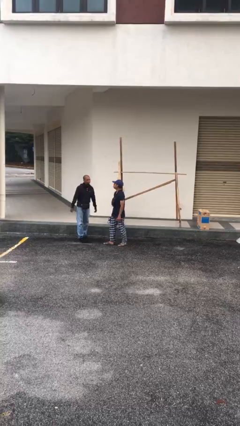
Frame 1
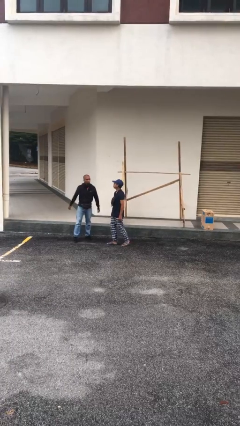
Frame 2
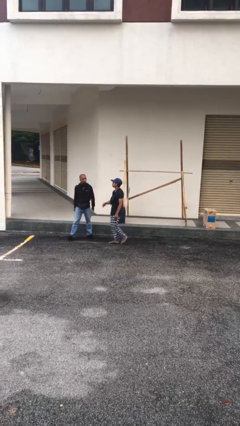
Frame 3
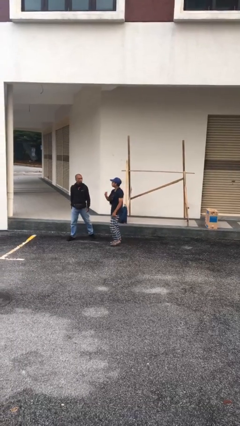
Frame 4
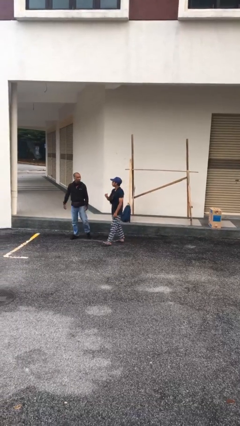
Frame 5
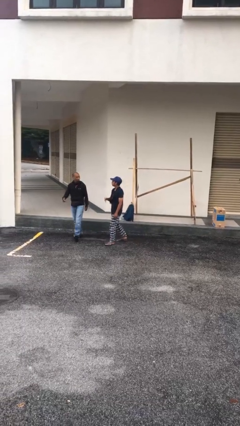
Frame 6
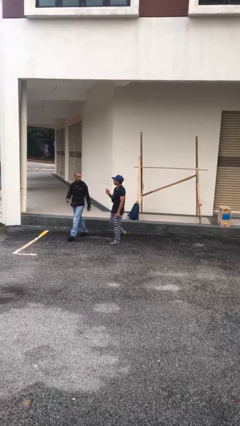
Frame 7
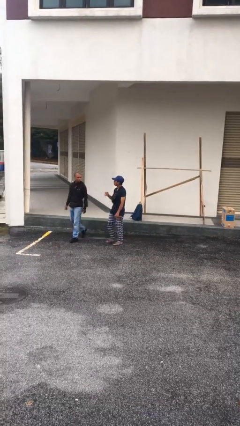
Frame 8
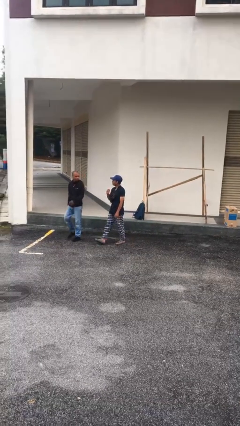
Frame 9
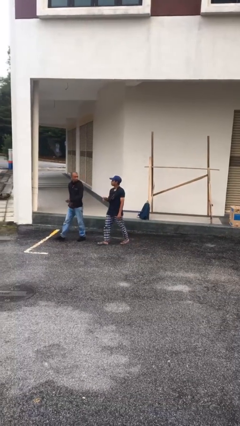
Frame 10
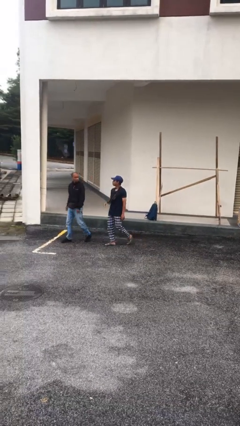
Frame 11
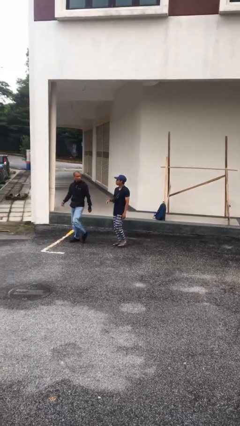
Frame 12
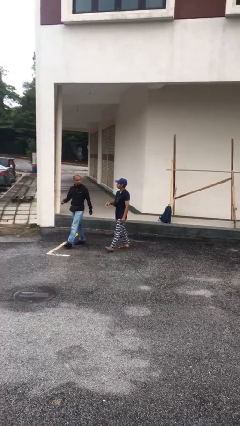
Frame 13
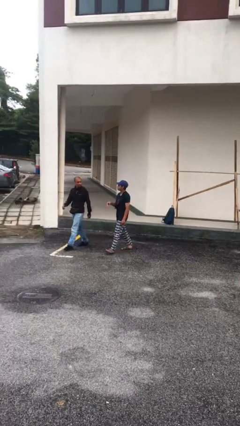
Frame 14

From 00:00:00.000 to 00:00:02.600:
person talks to person

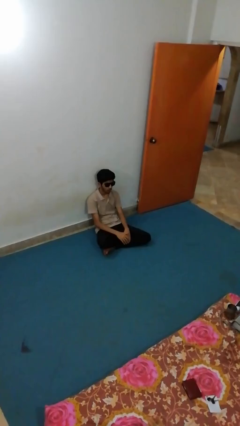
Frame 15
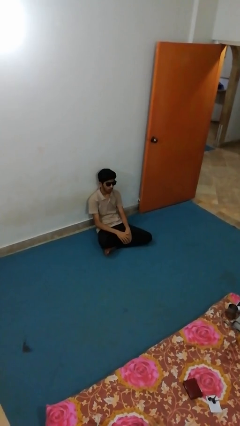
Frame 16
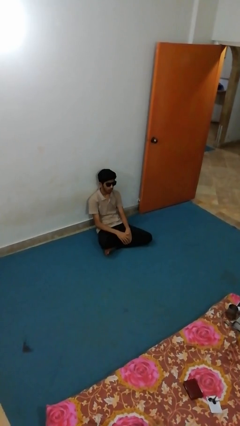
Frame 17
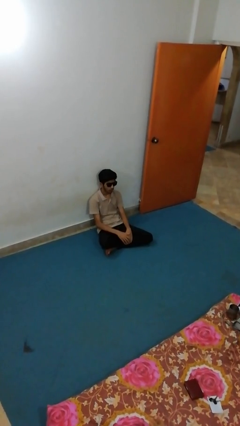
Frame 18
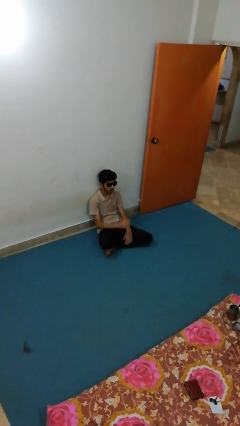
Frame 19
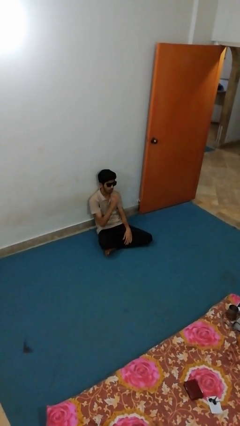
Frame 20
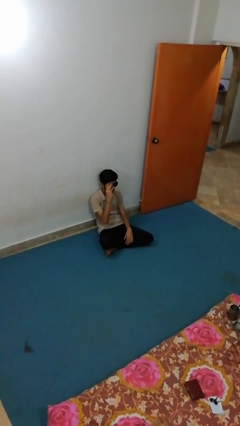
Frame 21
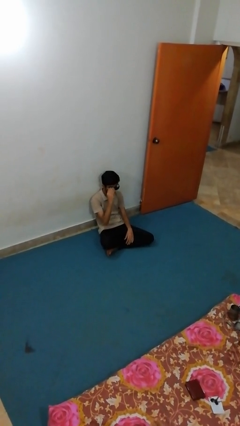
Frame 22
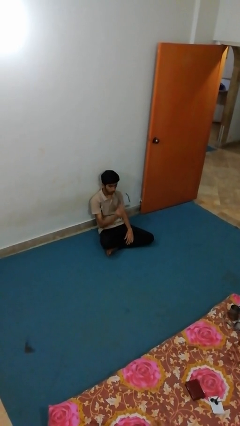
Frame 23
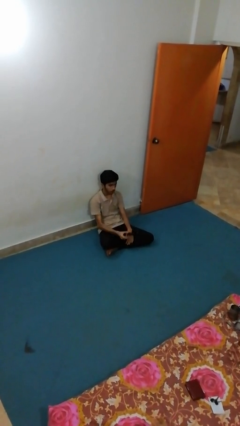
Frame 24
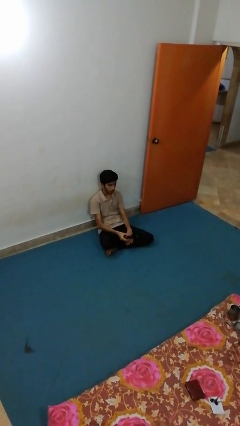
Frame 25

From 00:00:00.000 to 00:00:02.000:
person takes off sunglasses

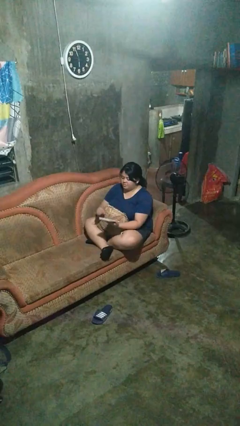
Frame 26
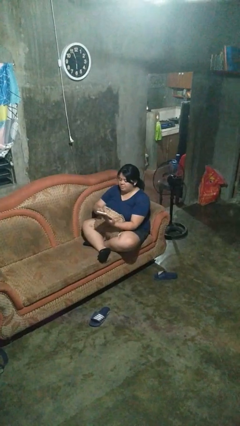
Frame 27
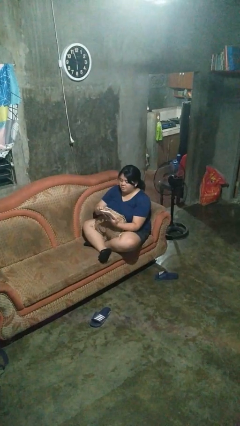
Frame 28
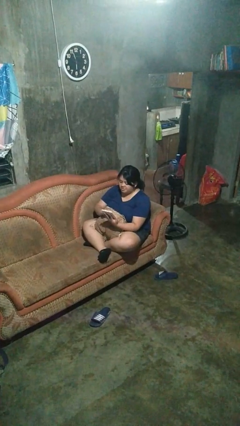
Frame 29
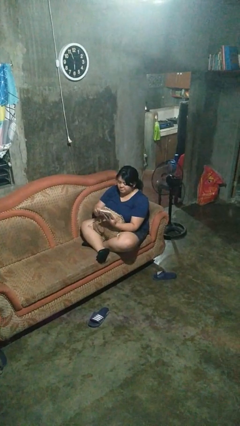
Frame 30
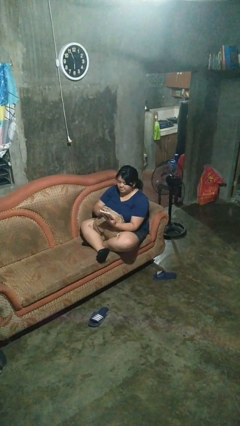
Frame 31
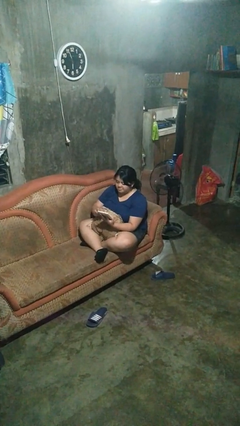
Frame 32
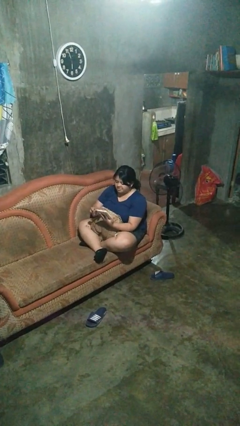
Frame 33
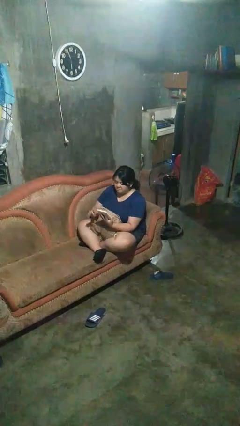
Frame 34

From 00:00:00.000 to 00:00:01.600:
person interacts with tablet

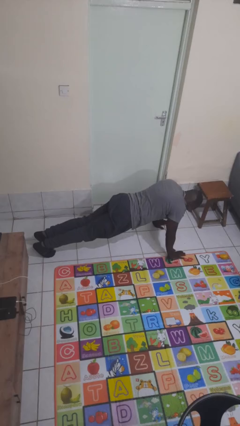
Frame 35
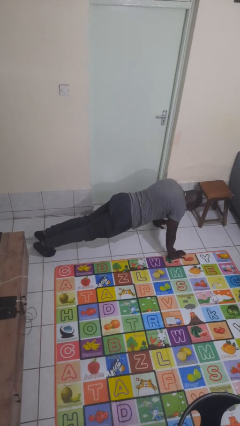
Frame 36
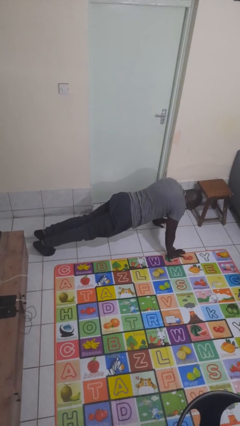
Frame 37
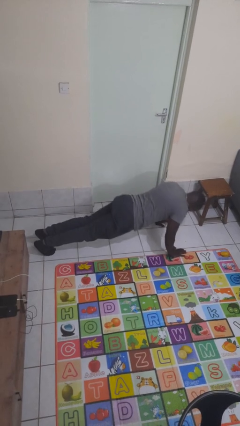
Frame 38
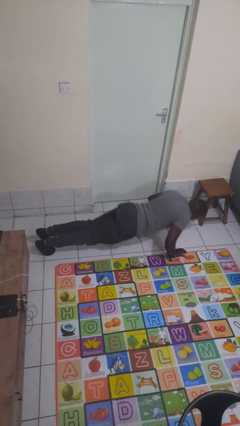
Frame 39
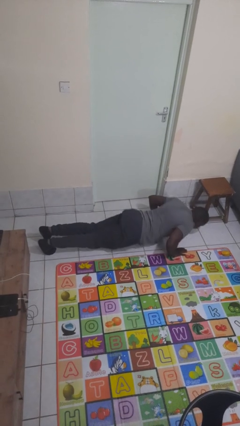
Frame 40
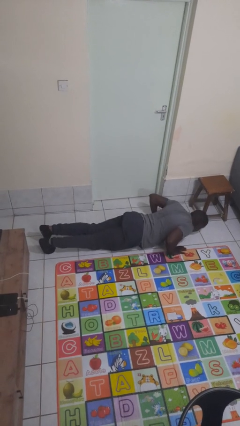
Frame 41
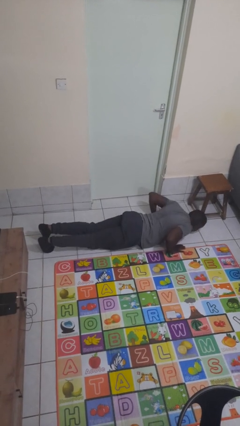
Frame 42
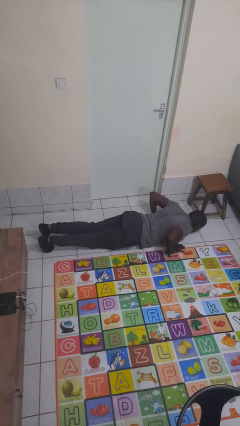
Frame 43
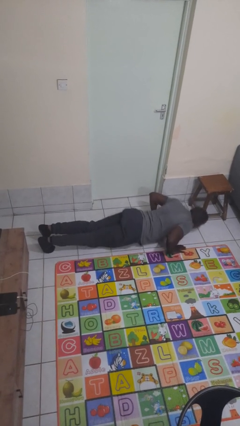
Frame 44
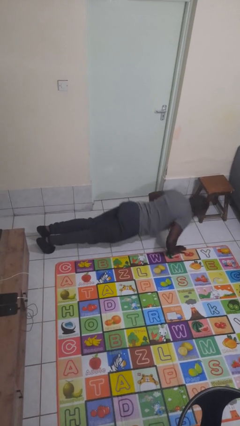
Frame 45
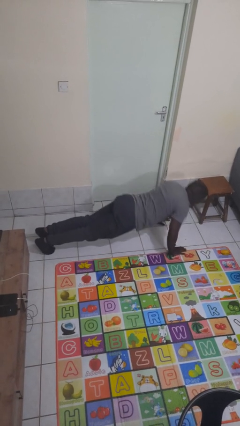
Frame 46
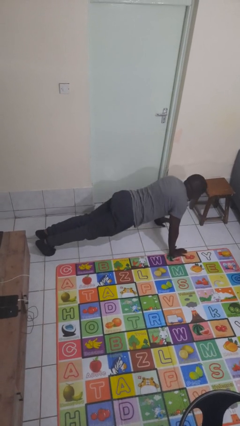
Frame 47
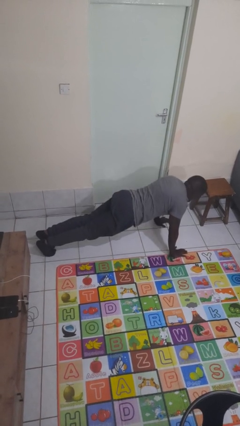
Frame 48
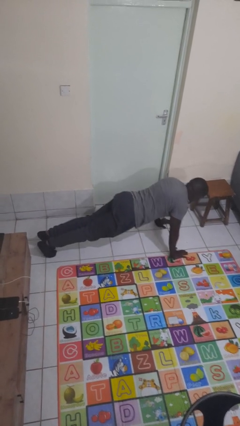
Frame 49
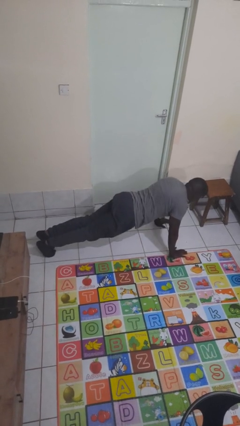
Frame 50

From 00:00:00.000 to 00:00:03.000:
person exercises with pushup

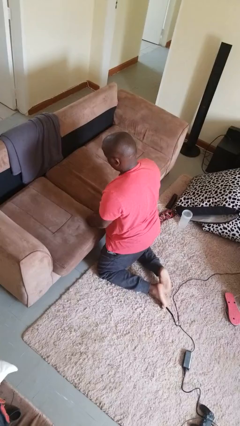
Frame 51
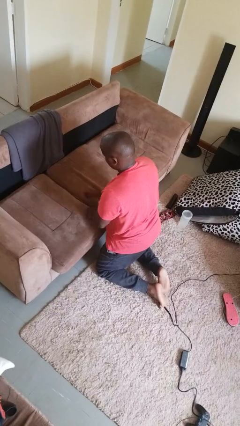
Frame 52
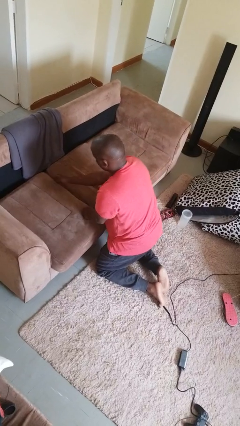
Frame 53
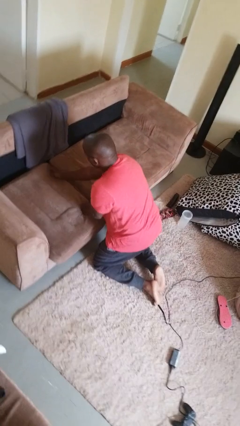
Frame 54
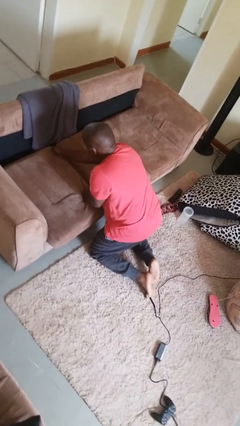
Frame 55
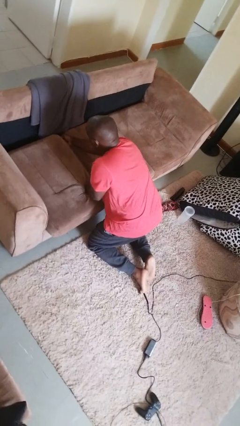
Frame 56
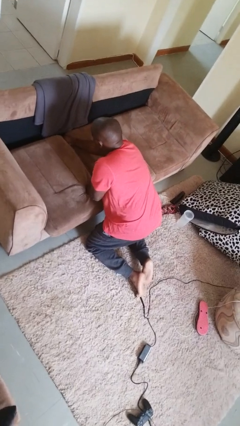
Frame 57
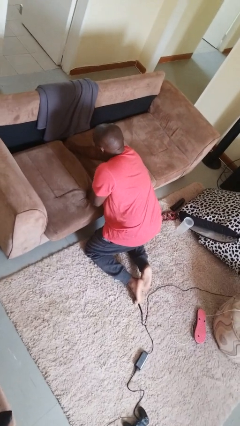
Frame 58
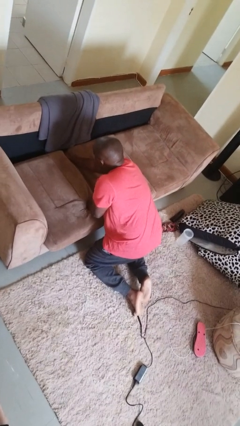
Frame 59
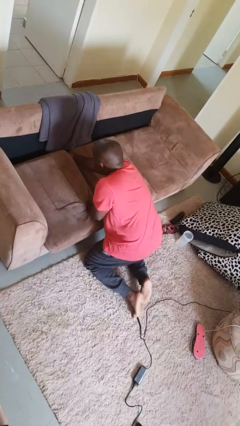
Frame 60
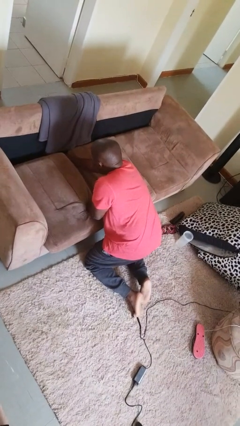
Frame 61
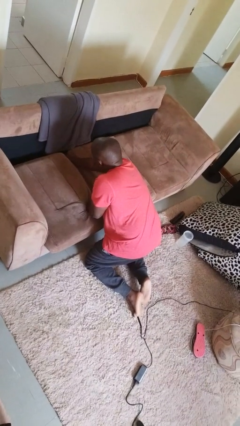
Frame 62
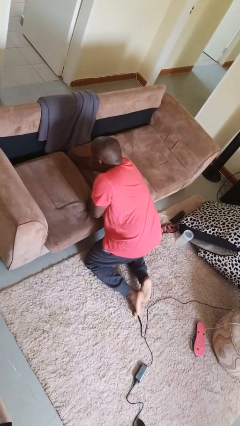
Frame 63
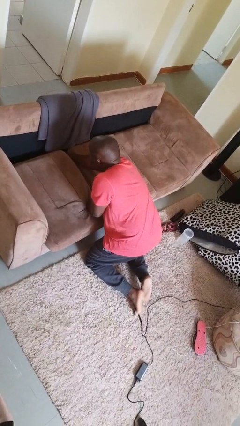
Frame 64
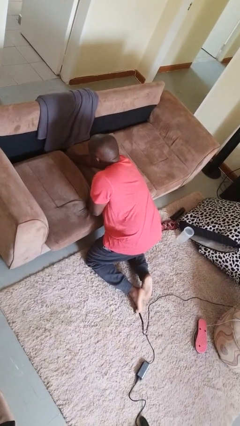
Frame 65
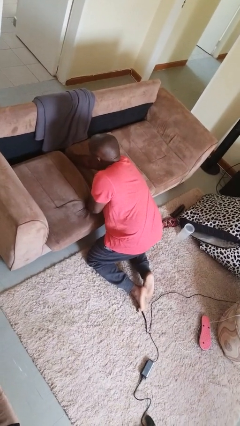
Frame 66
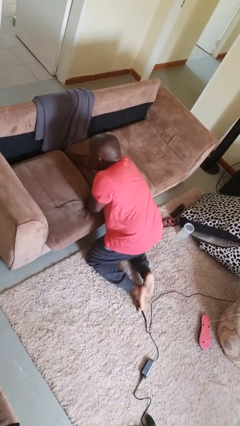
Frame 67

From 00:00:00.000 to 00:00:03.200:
person searches in couch

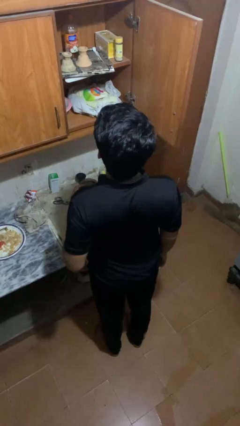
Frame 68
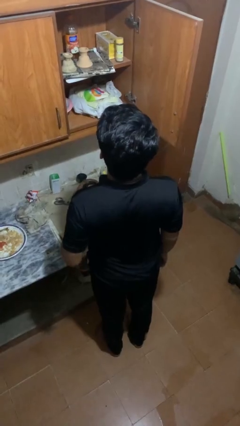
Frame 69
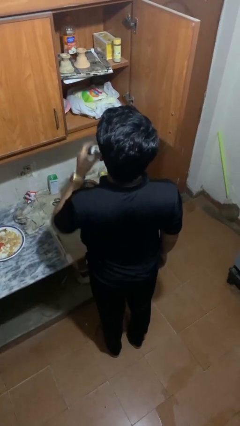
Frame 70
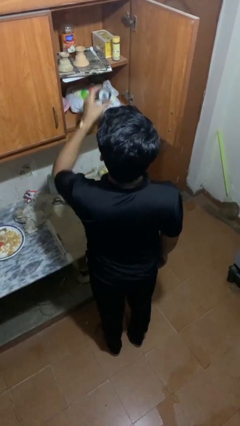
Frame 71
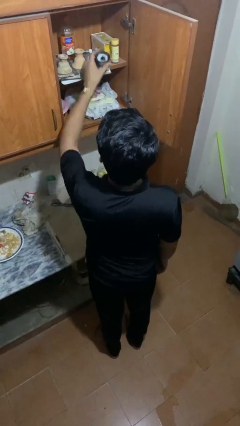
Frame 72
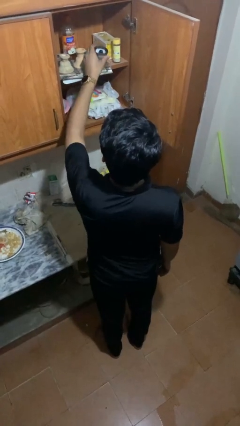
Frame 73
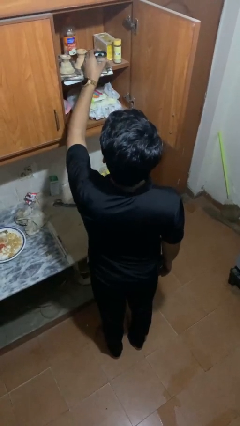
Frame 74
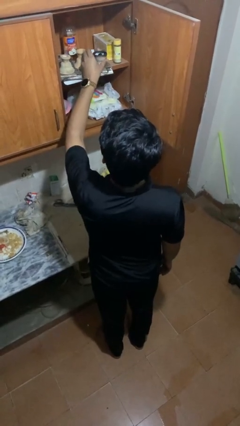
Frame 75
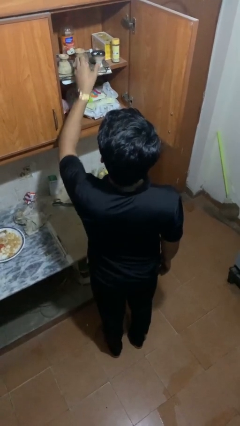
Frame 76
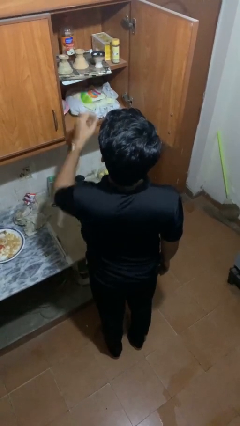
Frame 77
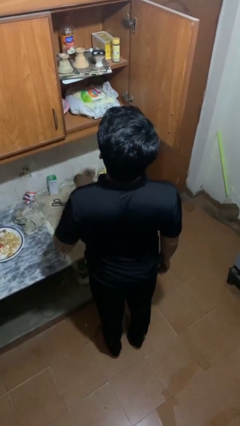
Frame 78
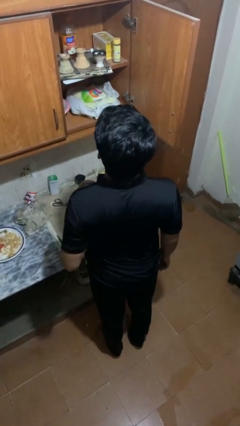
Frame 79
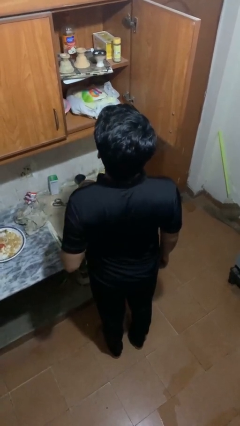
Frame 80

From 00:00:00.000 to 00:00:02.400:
person puts object in cabinet

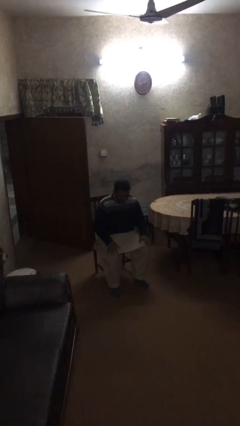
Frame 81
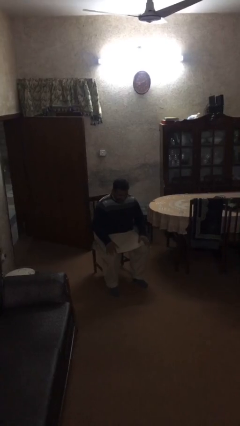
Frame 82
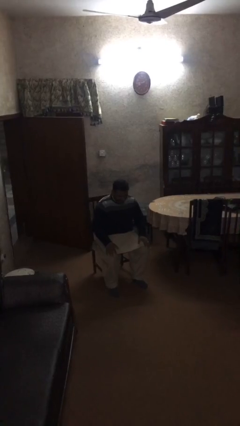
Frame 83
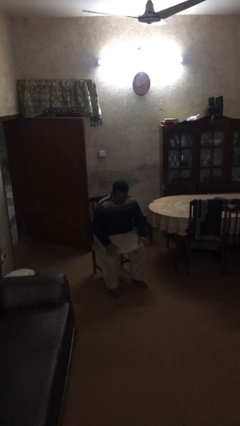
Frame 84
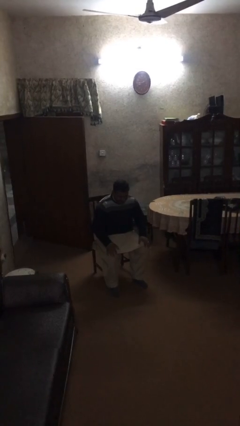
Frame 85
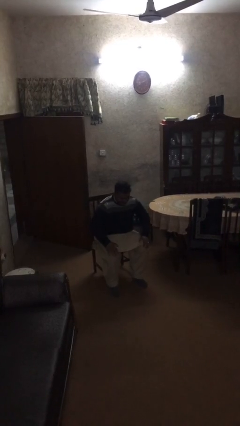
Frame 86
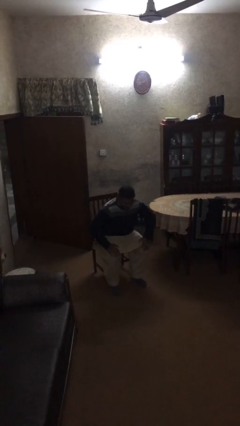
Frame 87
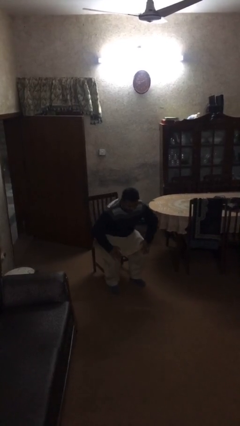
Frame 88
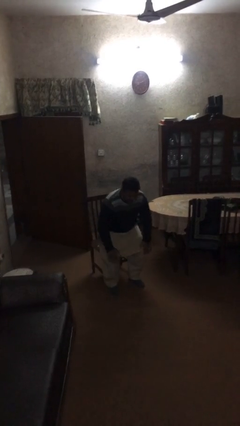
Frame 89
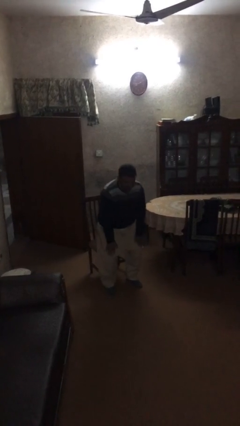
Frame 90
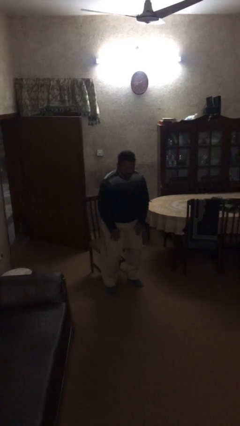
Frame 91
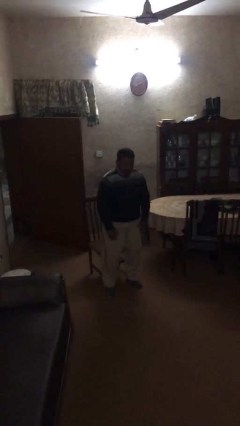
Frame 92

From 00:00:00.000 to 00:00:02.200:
person sits down

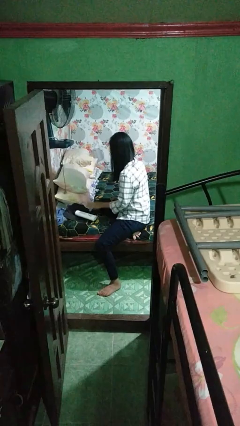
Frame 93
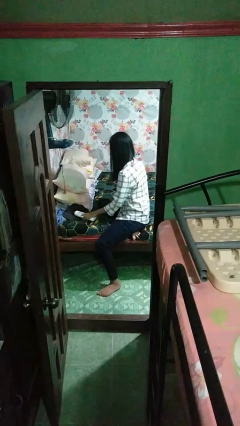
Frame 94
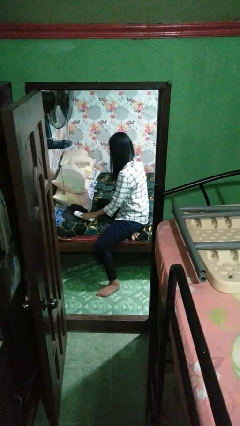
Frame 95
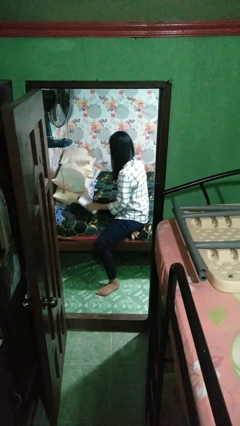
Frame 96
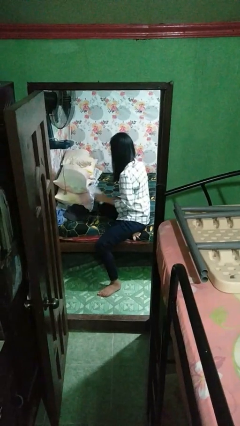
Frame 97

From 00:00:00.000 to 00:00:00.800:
person picks up object from bed
